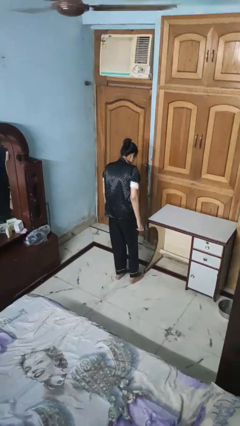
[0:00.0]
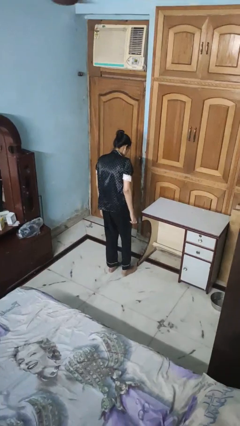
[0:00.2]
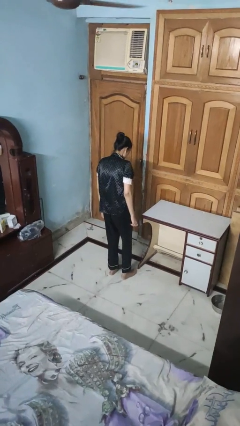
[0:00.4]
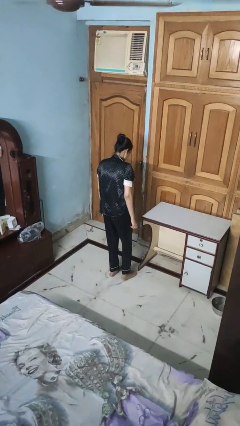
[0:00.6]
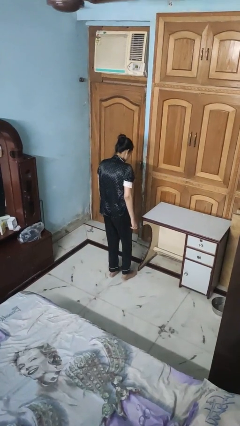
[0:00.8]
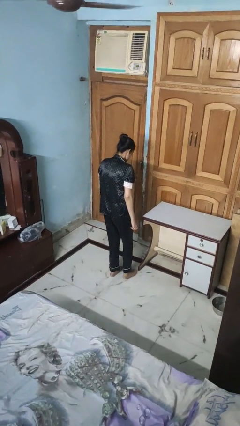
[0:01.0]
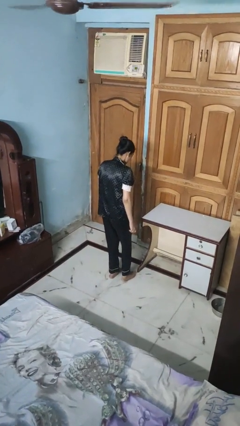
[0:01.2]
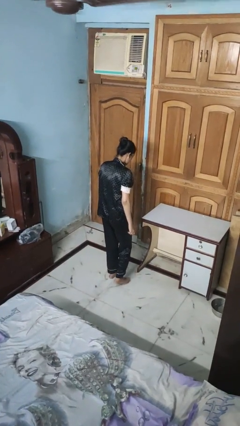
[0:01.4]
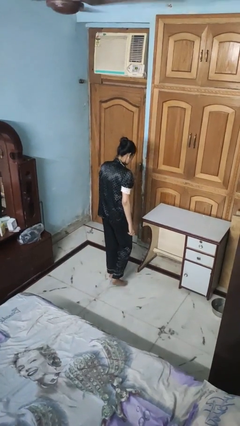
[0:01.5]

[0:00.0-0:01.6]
person stubs toe

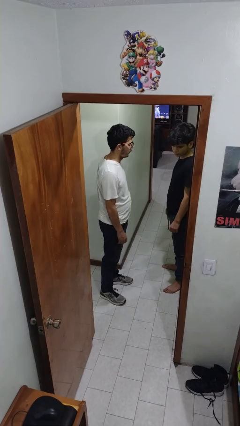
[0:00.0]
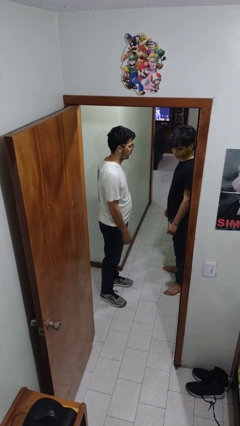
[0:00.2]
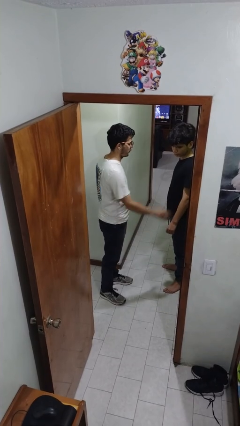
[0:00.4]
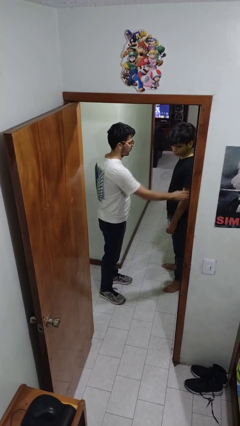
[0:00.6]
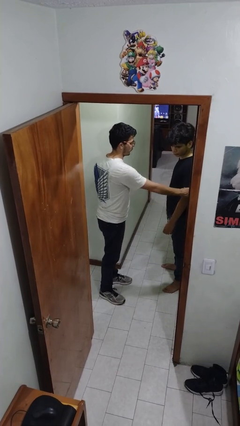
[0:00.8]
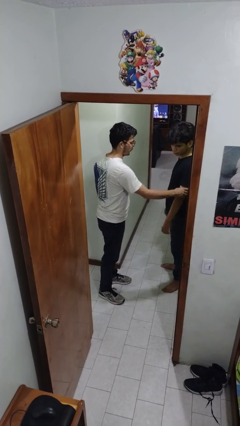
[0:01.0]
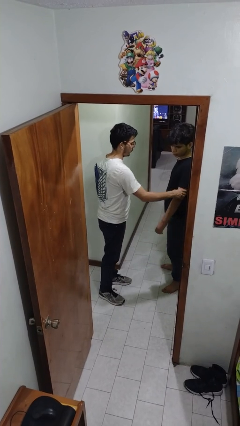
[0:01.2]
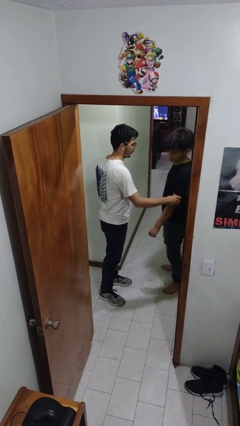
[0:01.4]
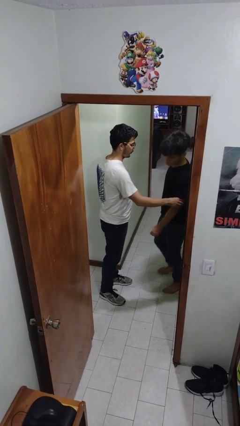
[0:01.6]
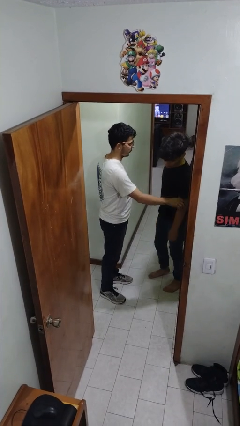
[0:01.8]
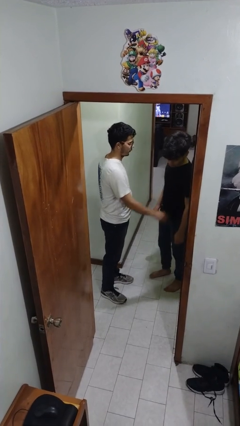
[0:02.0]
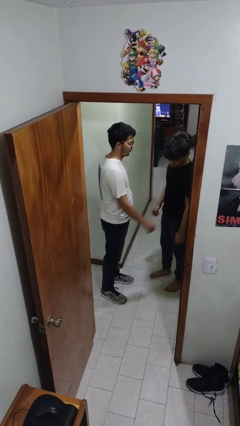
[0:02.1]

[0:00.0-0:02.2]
person grabs person by bicep

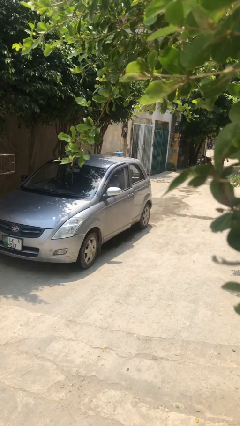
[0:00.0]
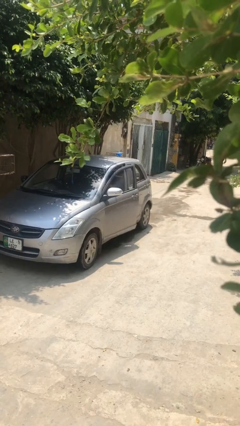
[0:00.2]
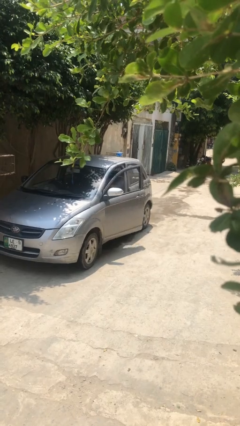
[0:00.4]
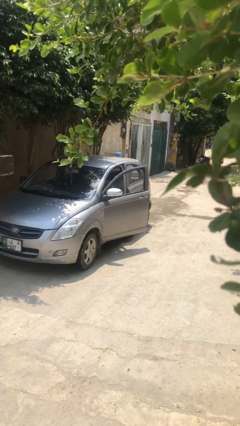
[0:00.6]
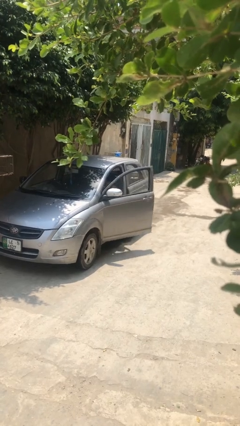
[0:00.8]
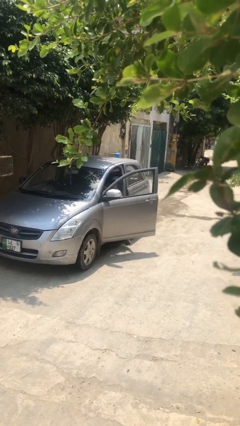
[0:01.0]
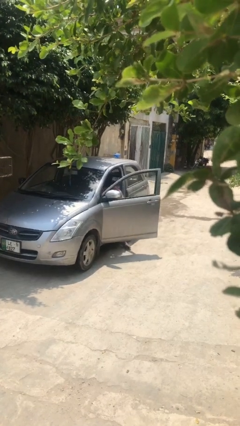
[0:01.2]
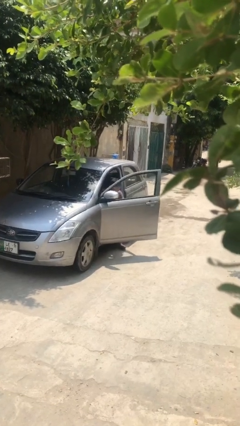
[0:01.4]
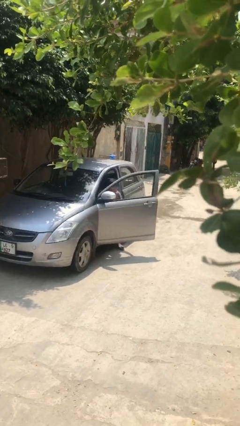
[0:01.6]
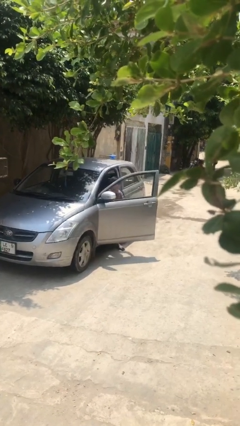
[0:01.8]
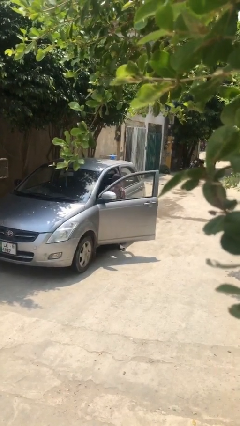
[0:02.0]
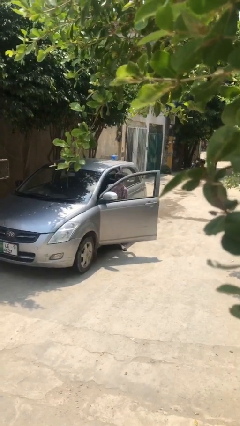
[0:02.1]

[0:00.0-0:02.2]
person opens car door

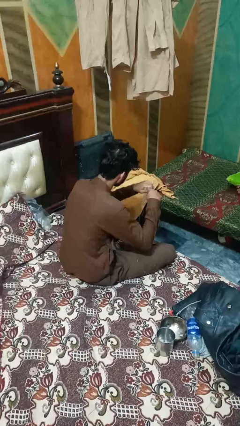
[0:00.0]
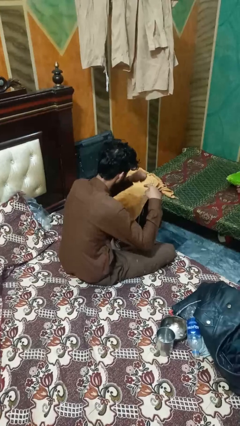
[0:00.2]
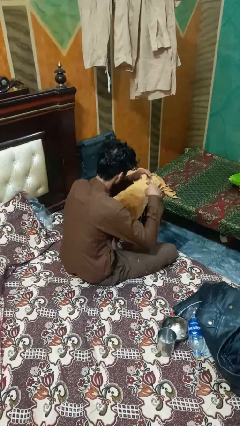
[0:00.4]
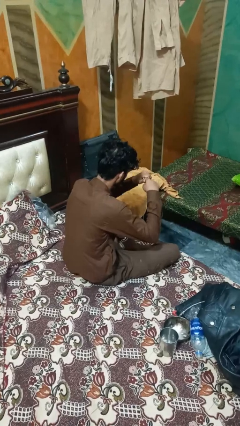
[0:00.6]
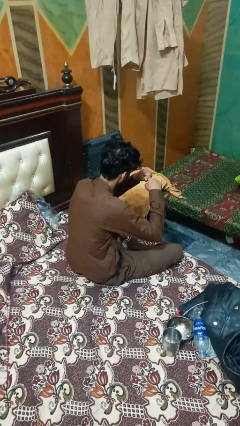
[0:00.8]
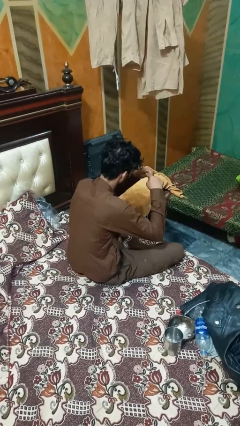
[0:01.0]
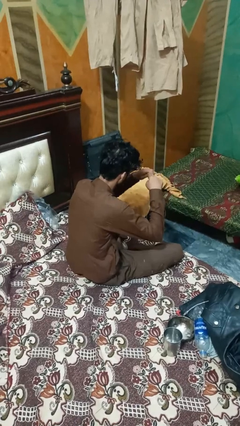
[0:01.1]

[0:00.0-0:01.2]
person snaps fingers

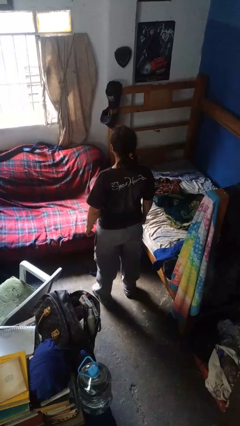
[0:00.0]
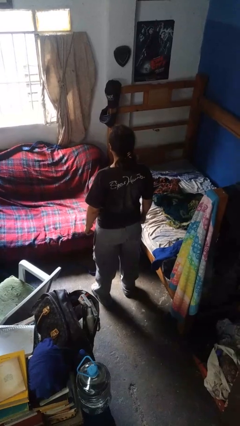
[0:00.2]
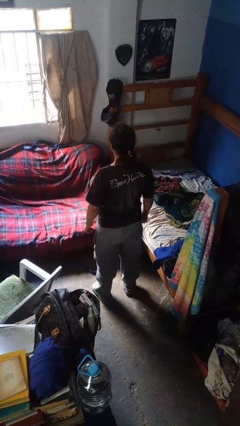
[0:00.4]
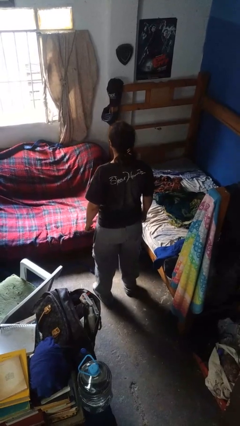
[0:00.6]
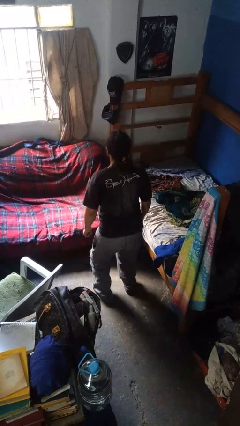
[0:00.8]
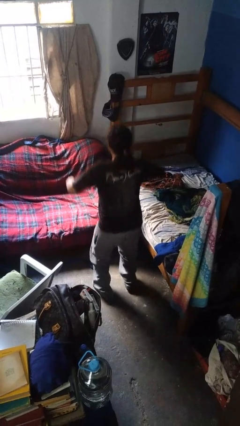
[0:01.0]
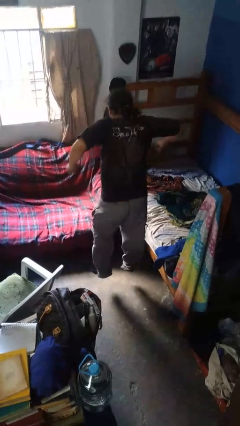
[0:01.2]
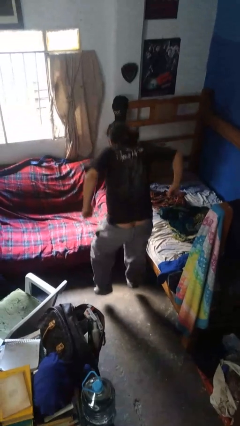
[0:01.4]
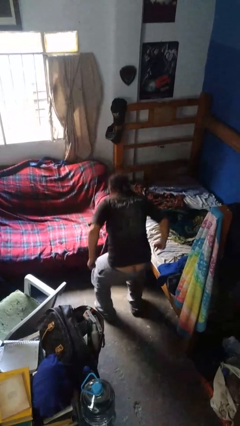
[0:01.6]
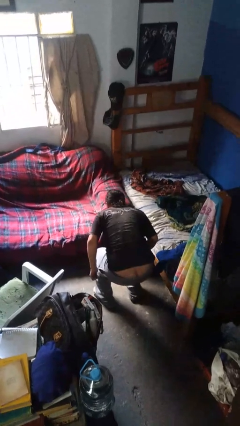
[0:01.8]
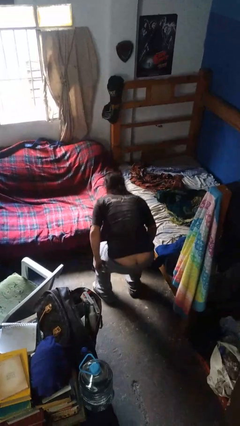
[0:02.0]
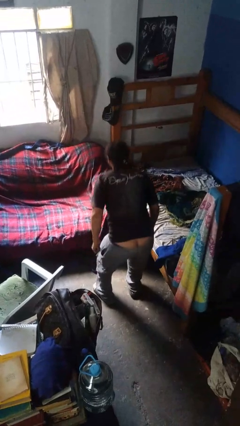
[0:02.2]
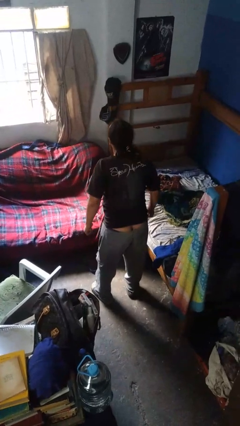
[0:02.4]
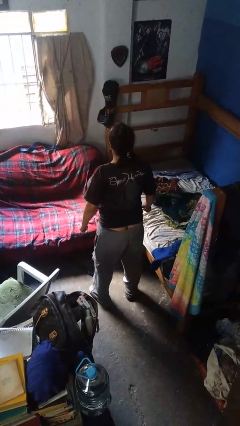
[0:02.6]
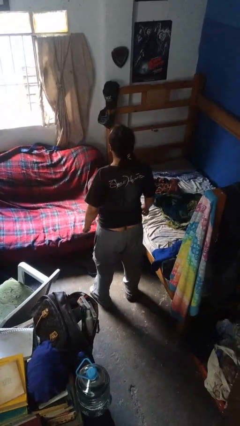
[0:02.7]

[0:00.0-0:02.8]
person jumps

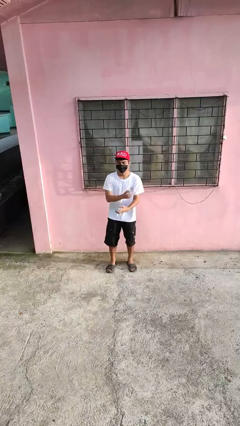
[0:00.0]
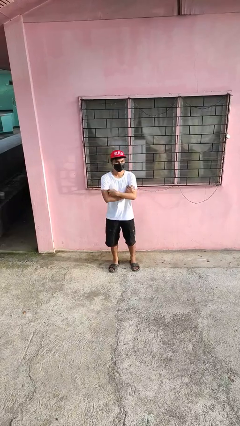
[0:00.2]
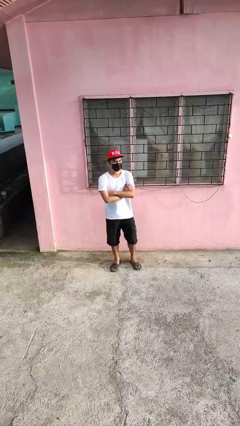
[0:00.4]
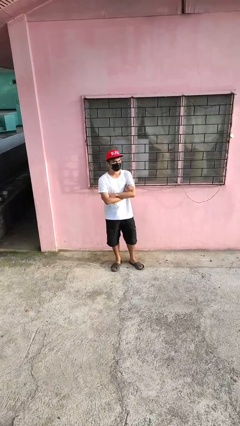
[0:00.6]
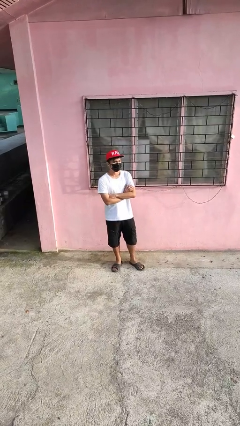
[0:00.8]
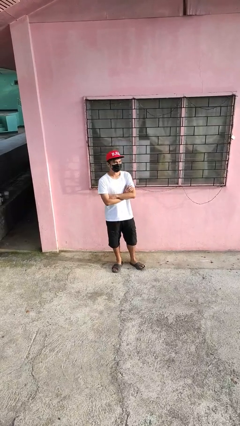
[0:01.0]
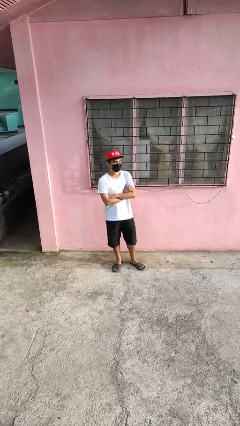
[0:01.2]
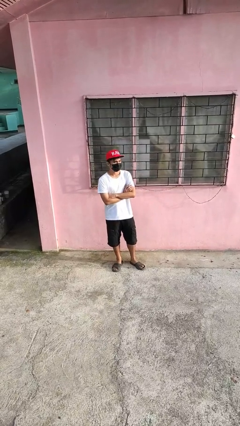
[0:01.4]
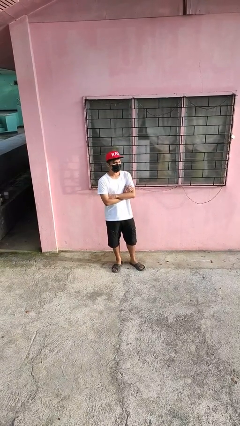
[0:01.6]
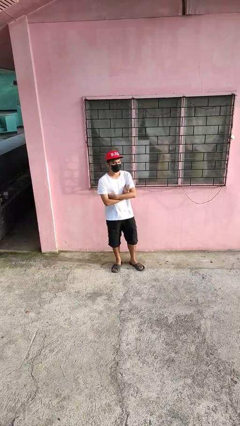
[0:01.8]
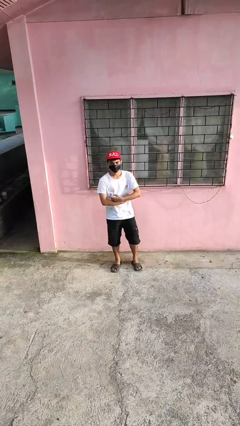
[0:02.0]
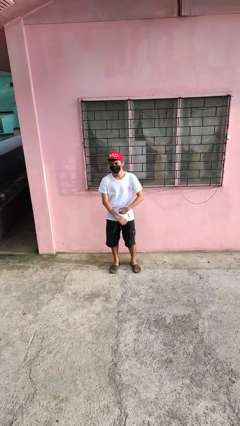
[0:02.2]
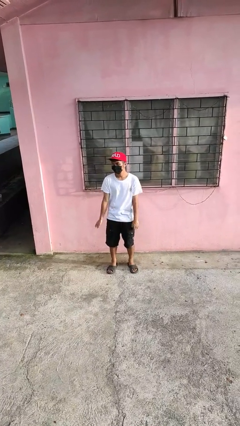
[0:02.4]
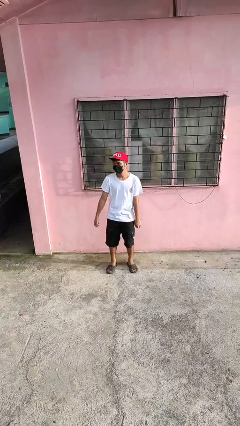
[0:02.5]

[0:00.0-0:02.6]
person crosses arms

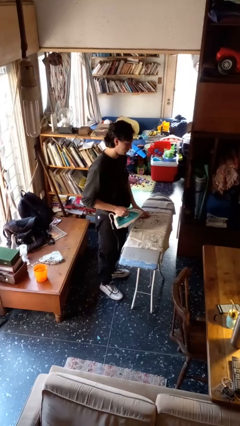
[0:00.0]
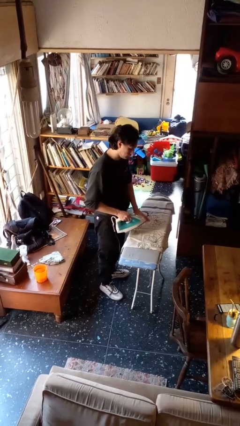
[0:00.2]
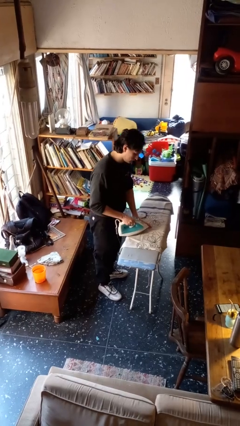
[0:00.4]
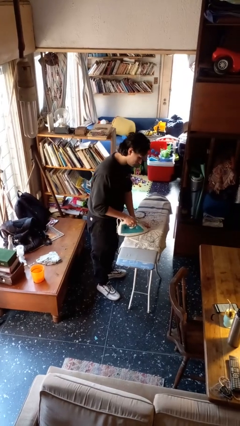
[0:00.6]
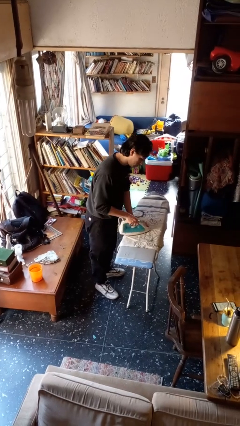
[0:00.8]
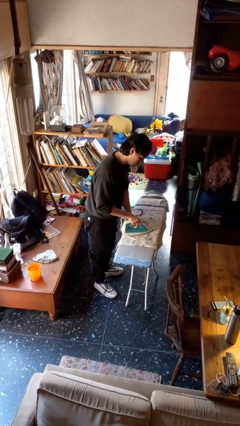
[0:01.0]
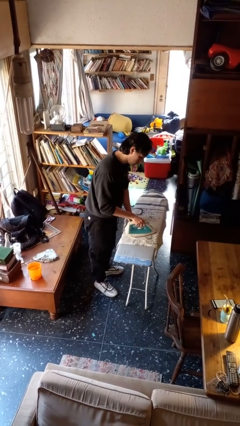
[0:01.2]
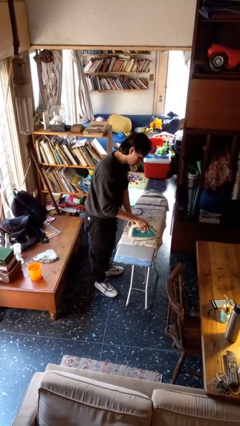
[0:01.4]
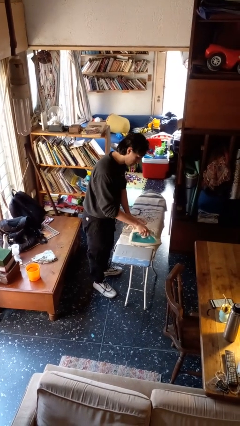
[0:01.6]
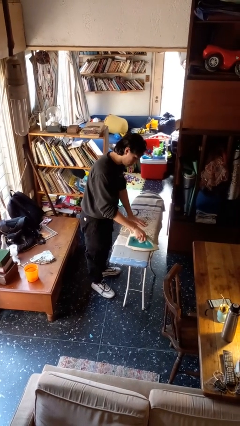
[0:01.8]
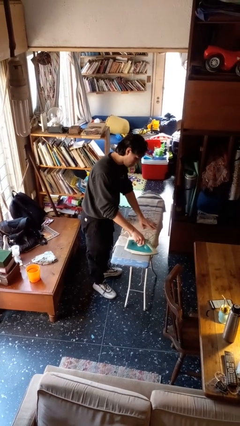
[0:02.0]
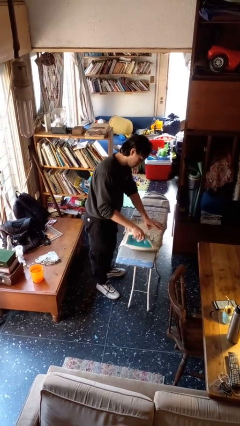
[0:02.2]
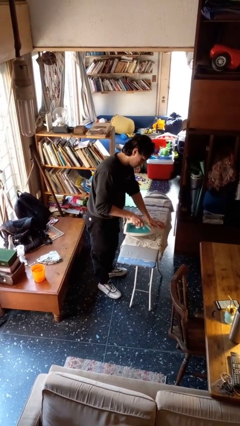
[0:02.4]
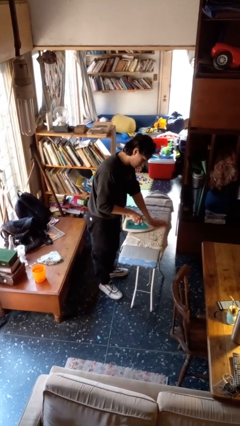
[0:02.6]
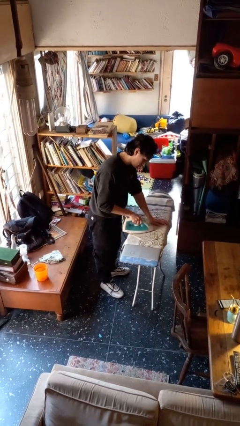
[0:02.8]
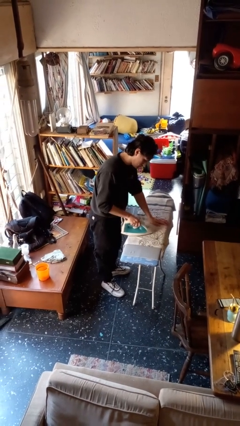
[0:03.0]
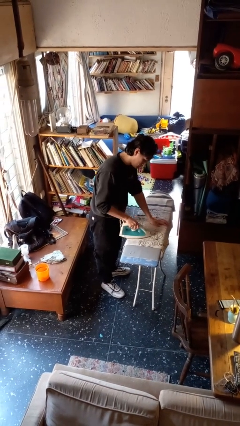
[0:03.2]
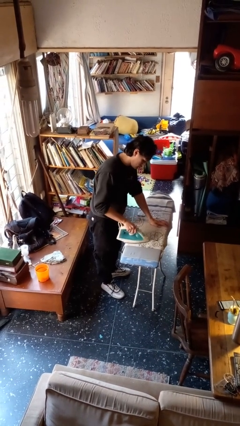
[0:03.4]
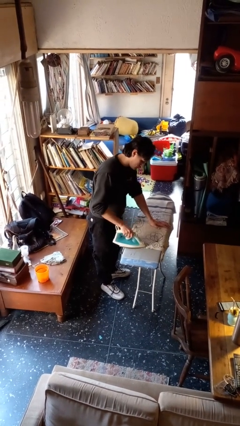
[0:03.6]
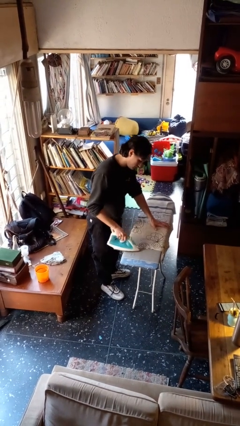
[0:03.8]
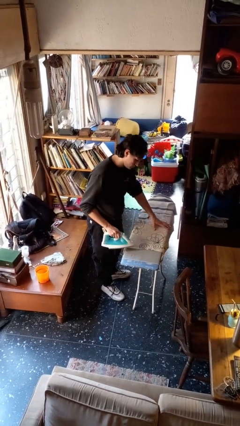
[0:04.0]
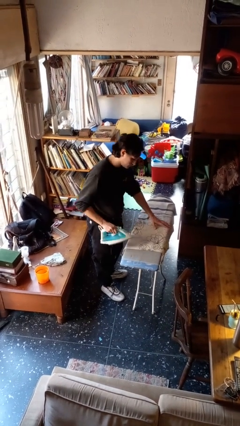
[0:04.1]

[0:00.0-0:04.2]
person irons clothes

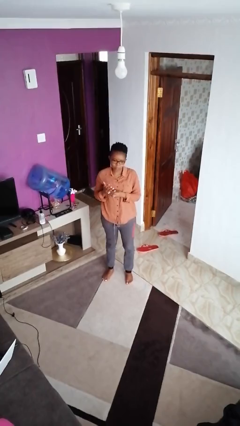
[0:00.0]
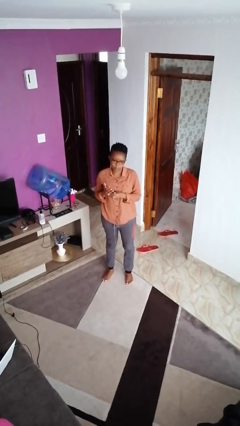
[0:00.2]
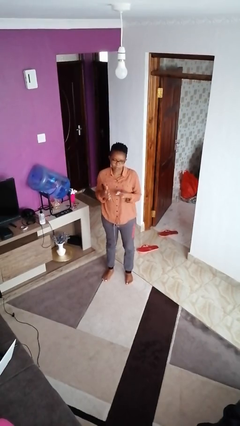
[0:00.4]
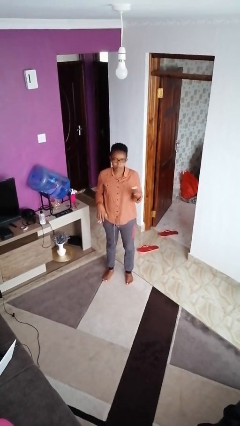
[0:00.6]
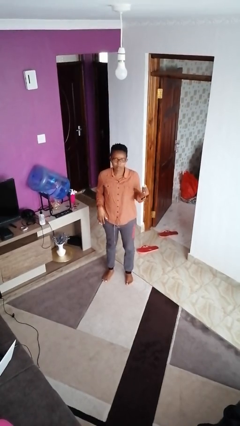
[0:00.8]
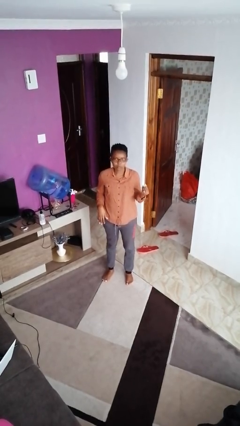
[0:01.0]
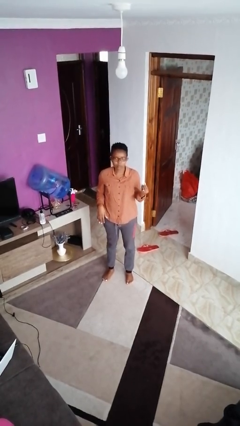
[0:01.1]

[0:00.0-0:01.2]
person takes off ring